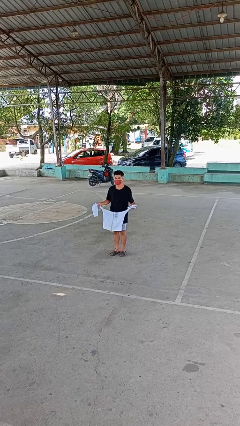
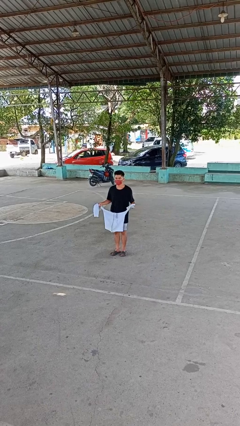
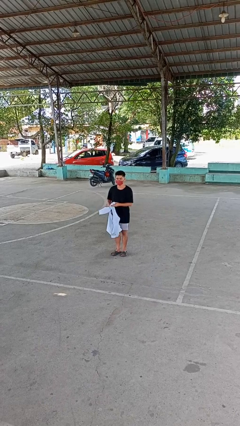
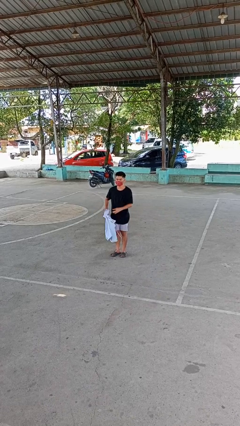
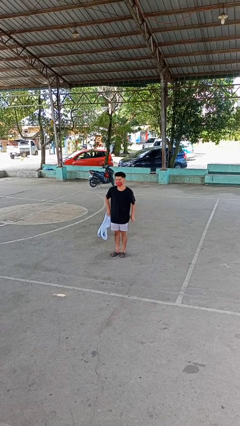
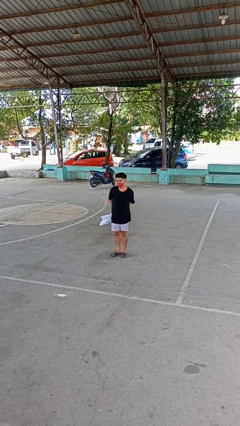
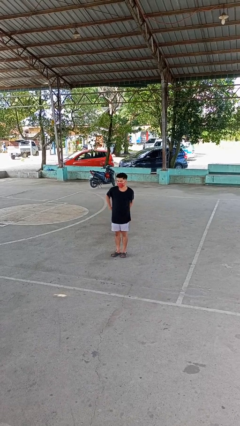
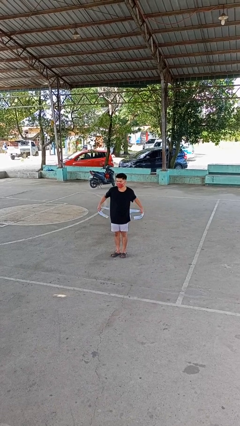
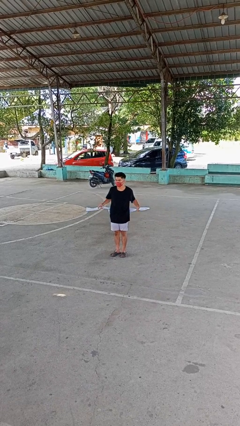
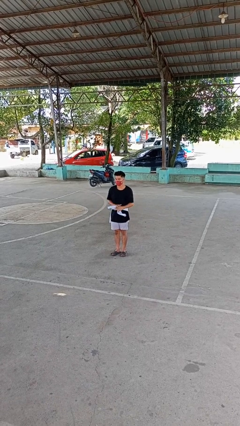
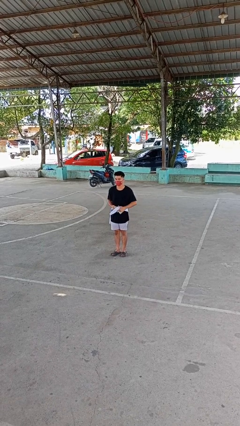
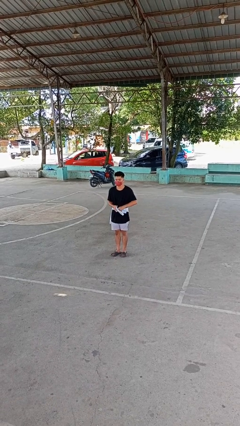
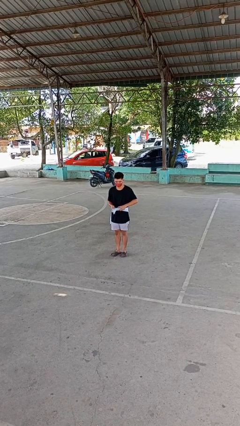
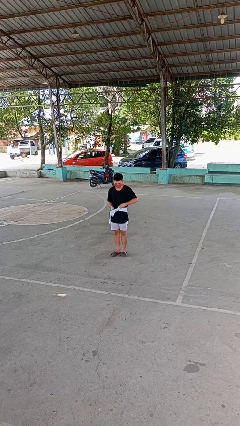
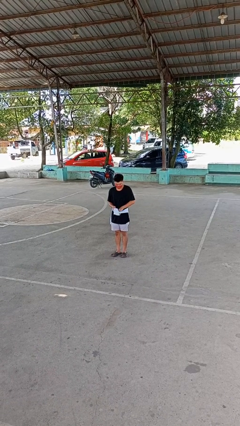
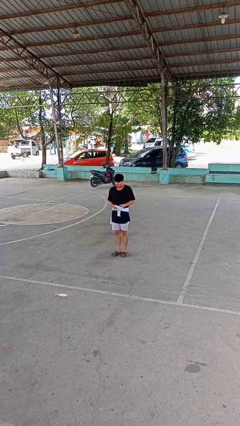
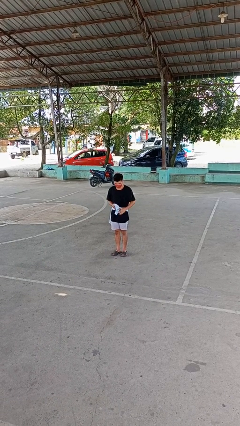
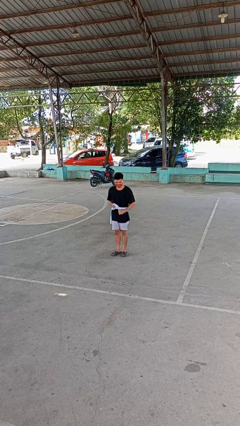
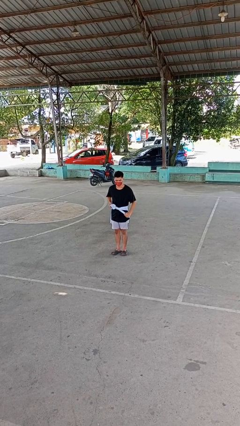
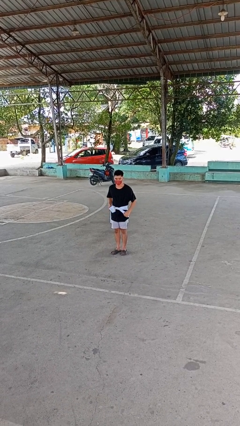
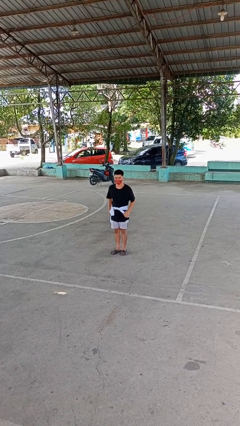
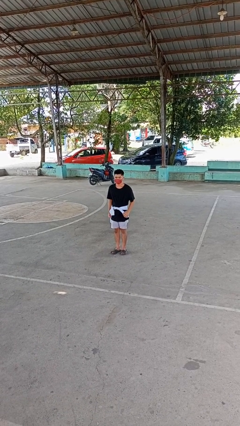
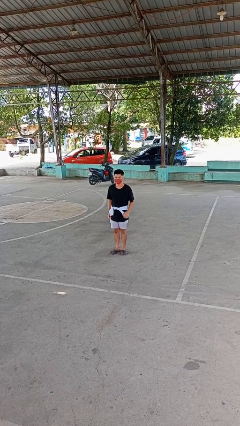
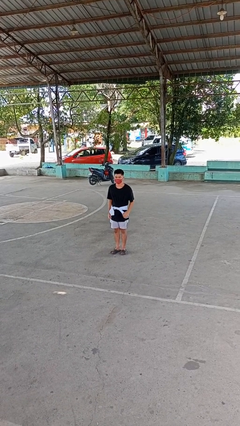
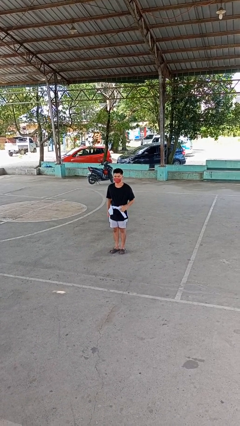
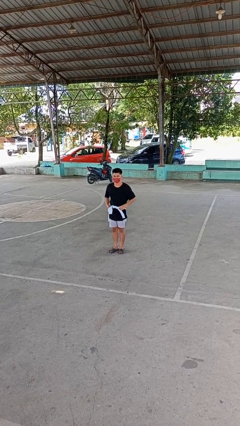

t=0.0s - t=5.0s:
person ties jacket around waist

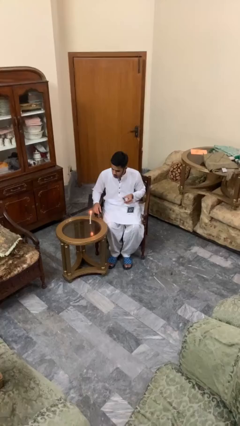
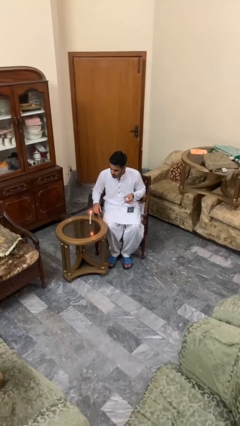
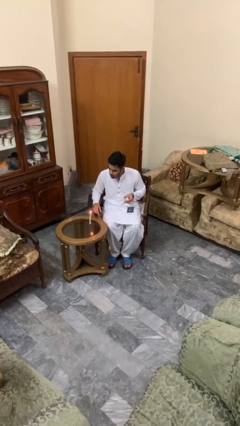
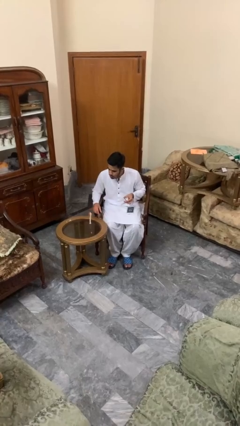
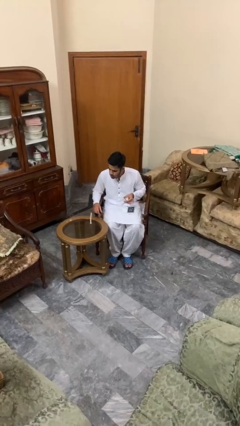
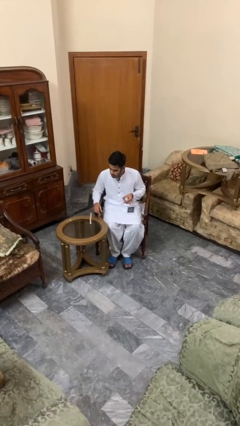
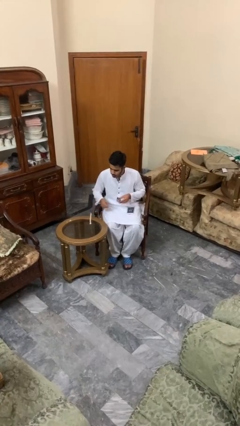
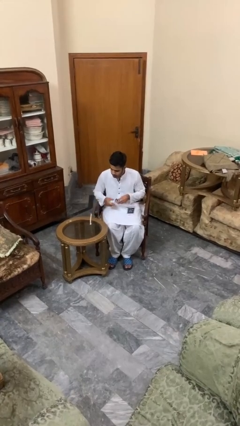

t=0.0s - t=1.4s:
person extinguishes candle

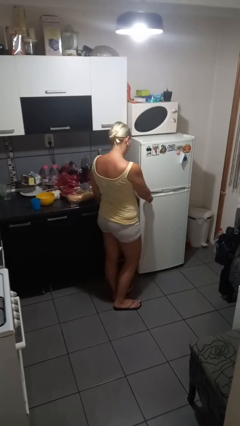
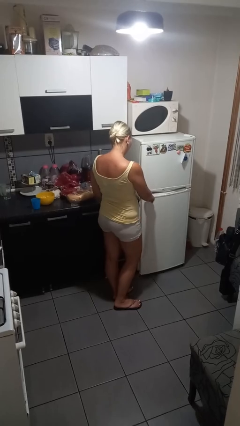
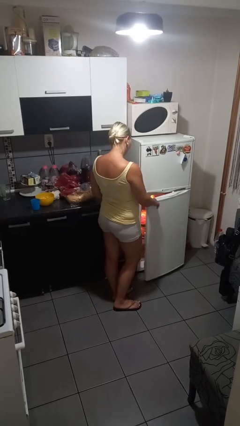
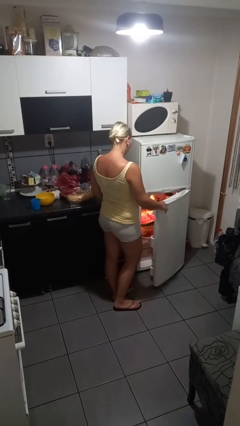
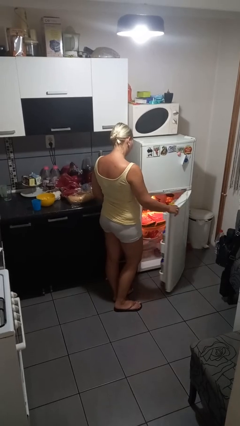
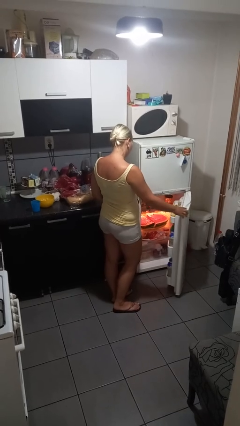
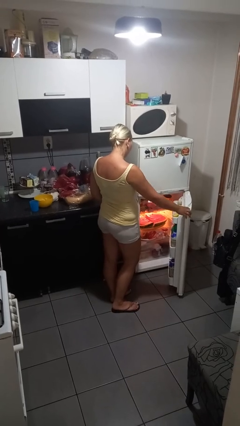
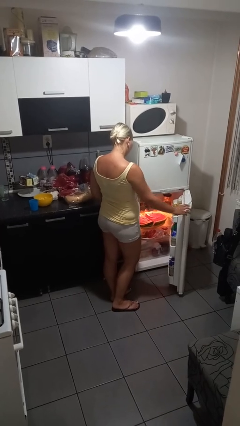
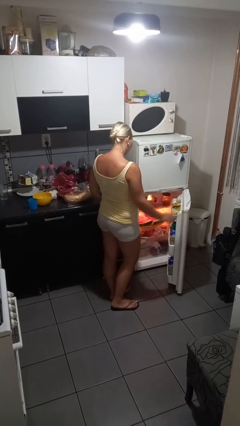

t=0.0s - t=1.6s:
person opens refrigerator

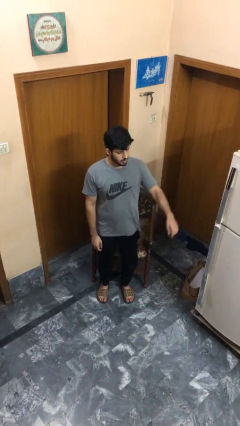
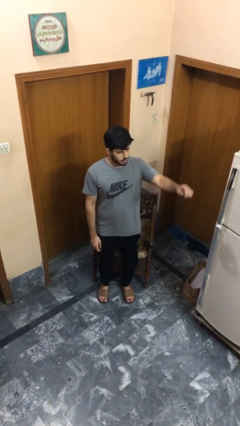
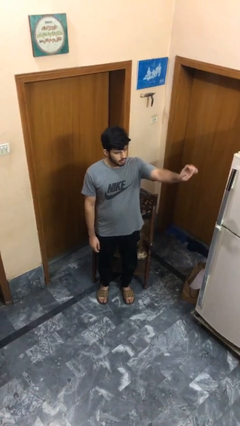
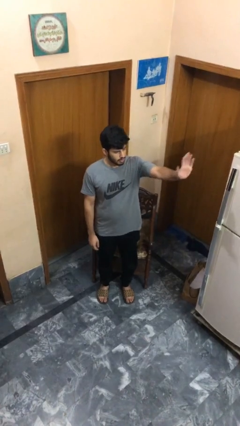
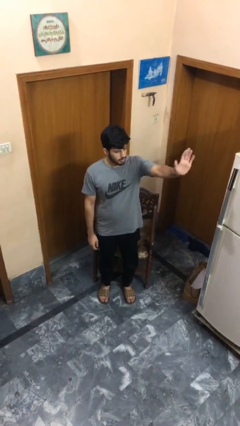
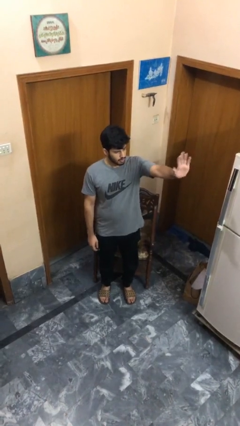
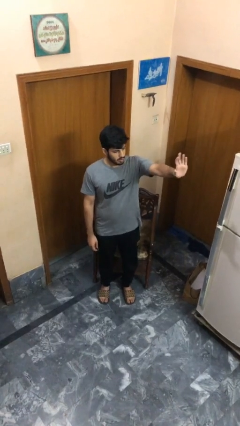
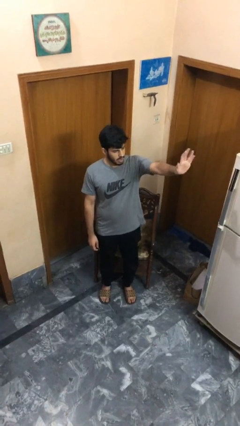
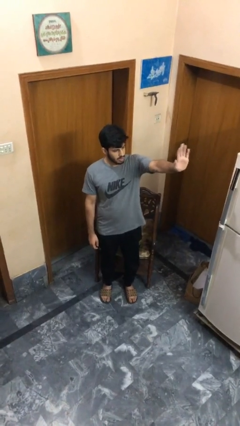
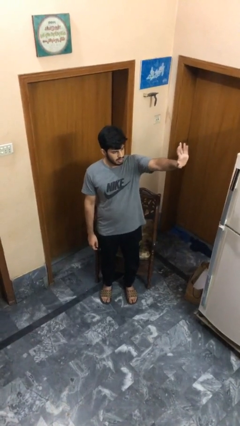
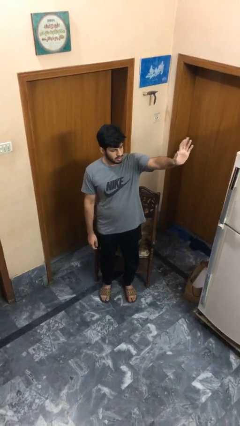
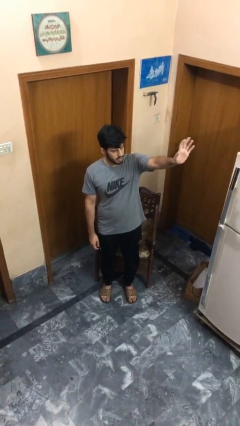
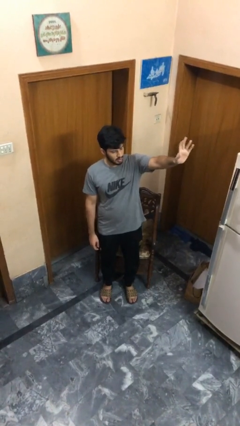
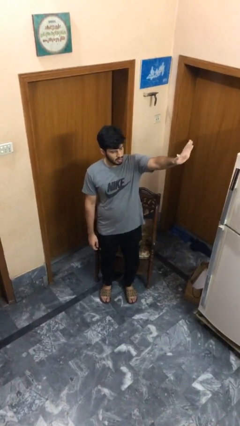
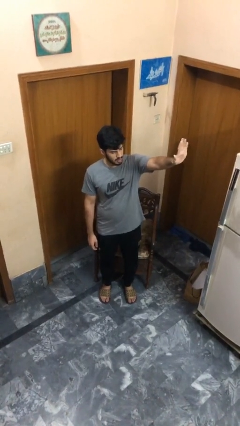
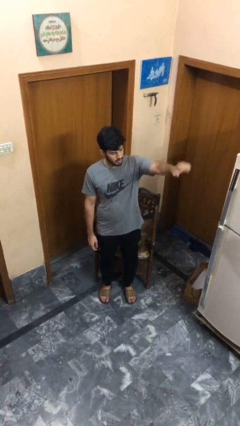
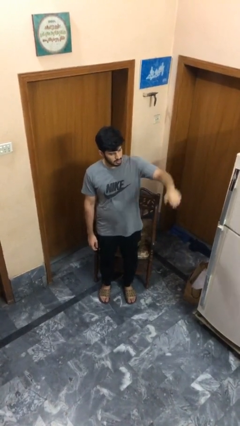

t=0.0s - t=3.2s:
person waves at person

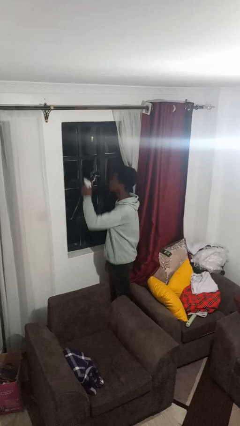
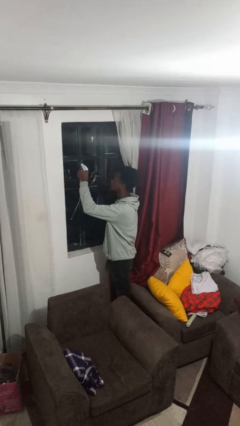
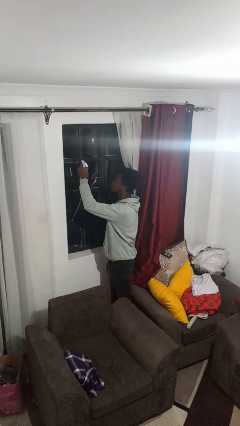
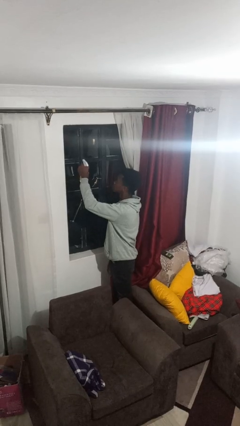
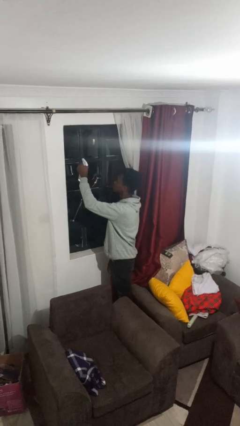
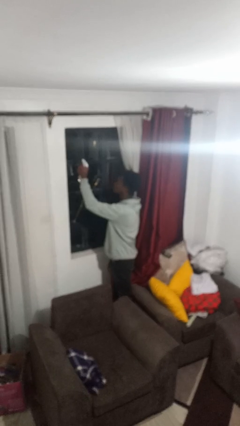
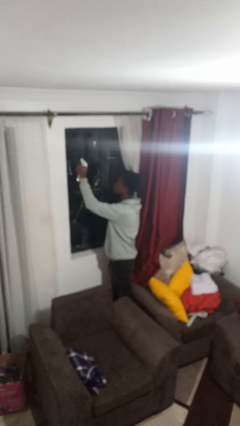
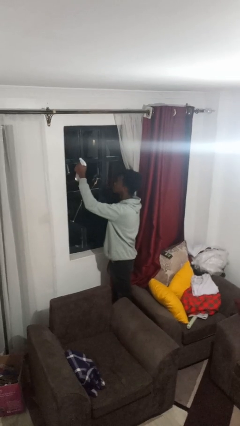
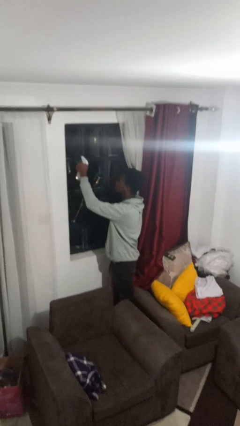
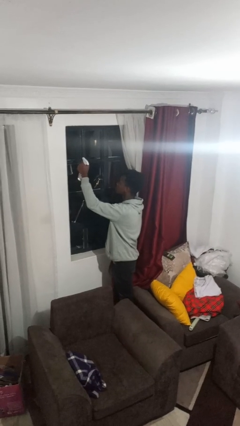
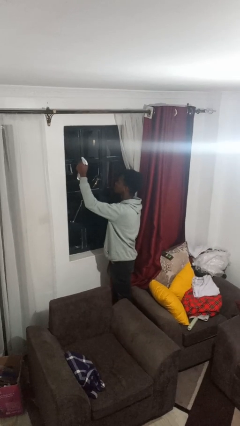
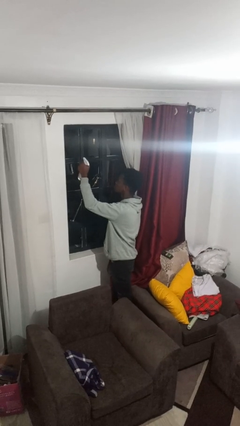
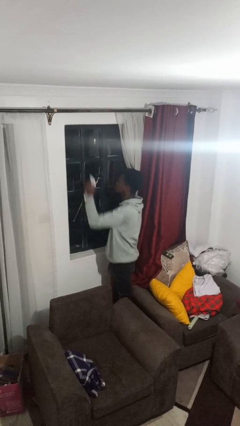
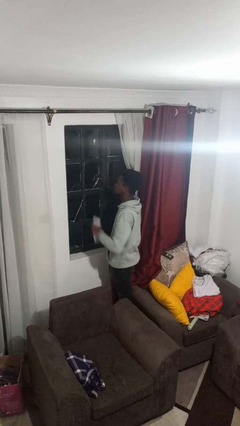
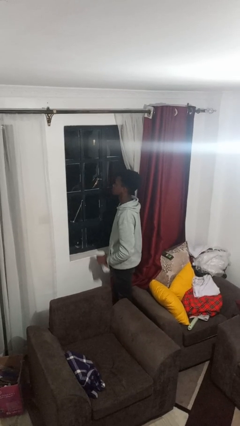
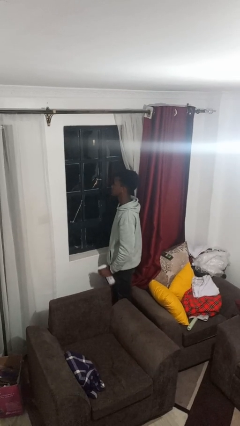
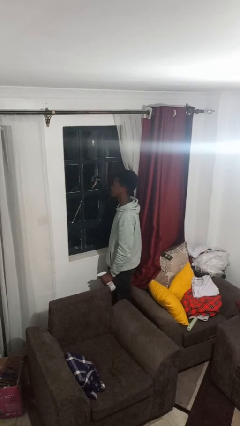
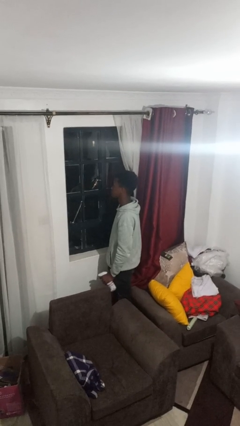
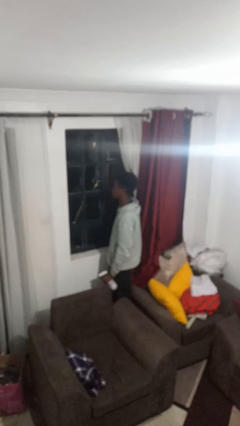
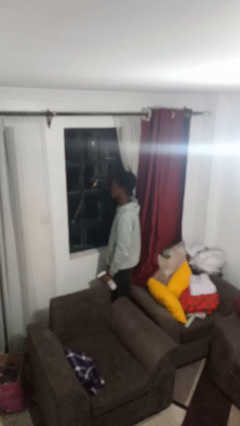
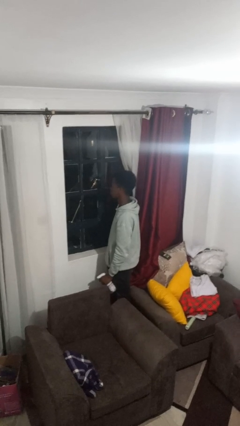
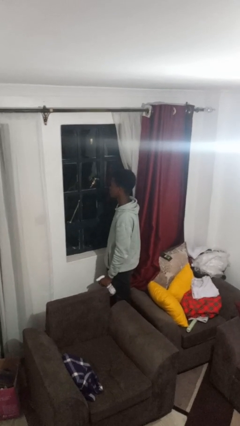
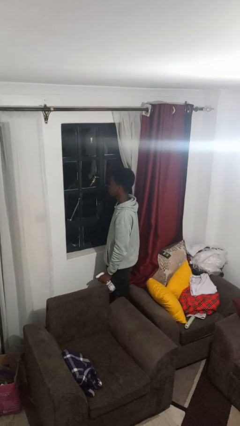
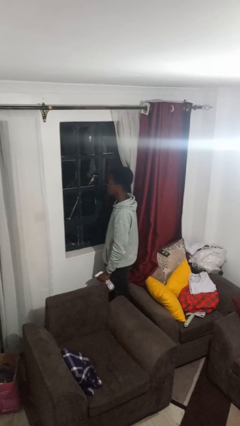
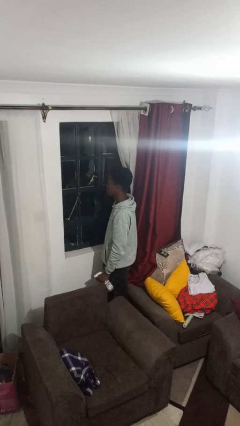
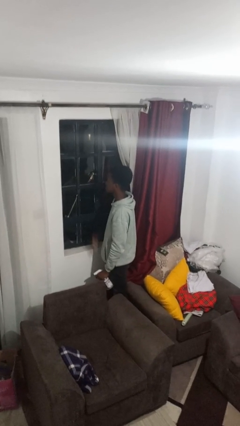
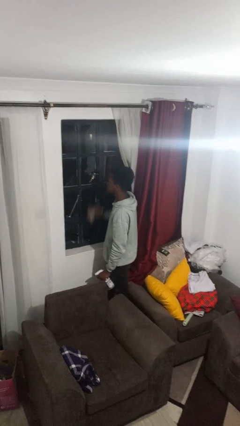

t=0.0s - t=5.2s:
person sprays from bottle

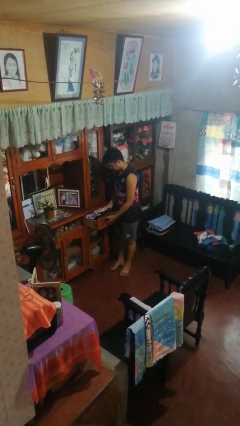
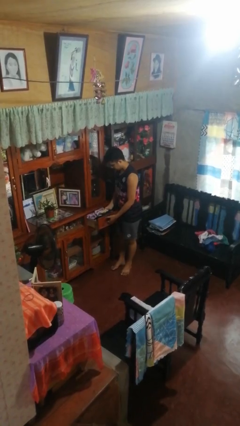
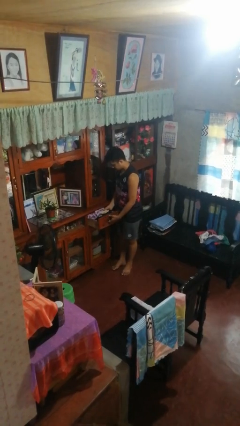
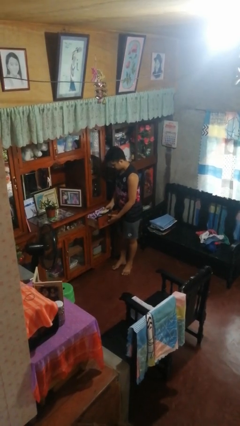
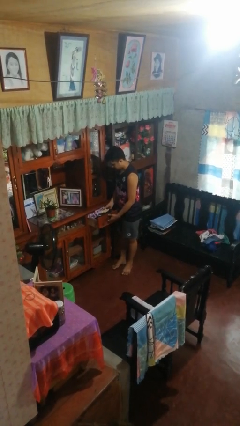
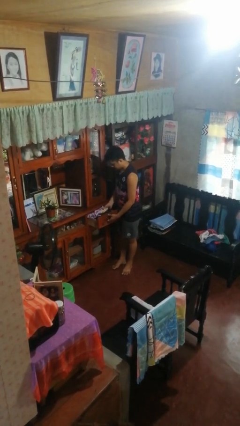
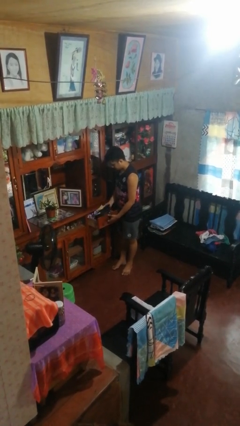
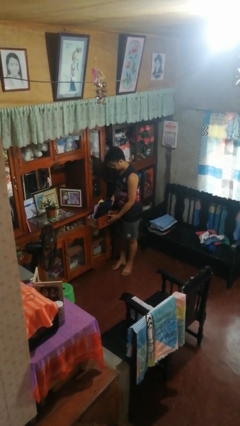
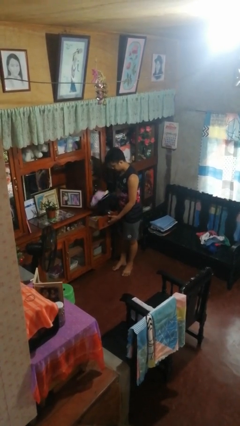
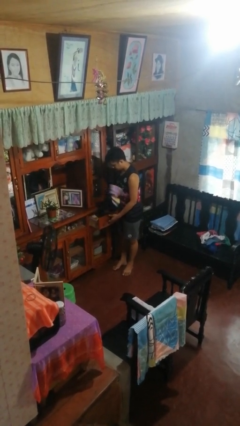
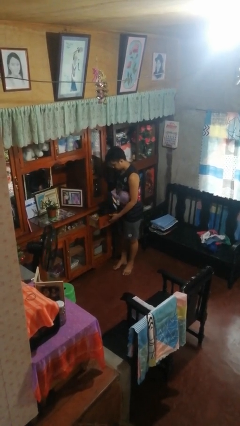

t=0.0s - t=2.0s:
person takes clothes from dresser
